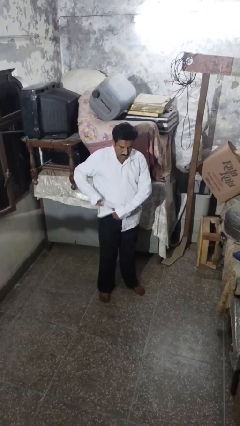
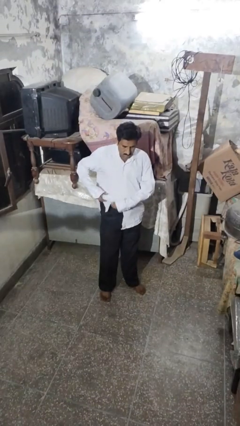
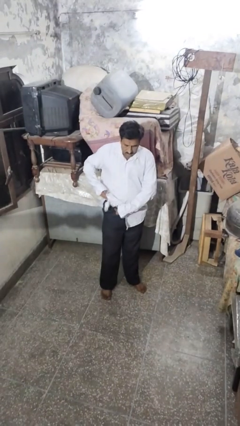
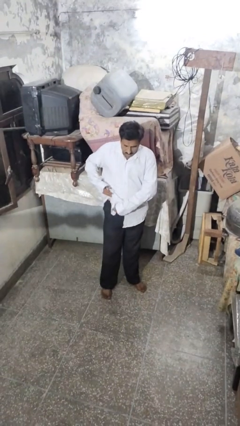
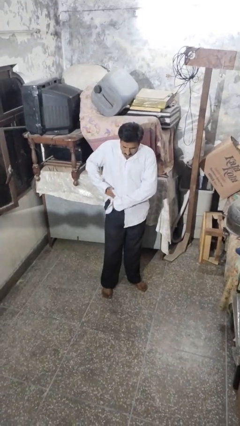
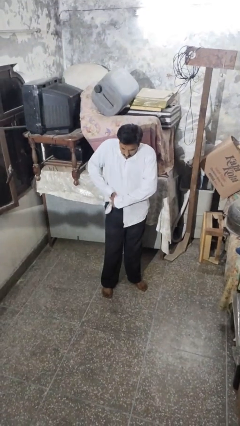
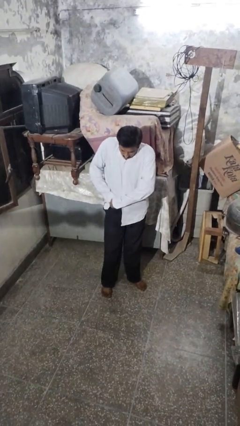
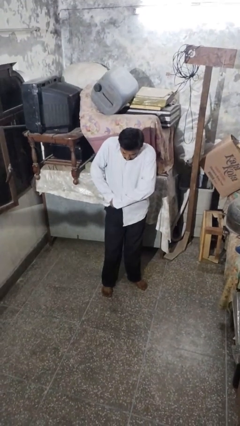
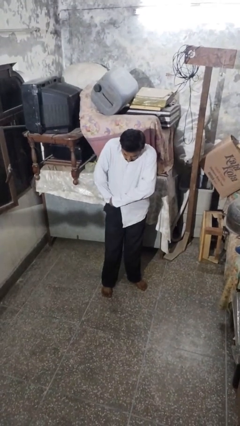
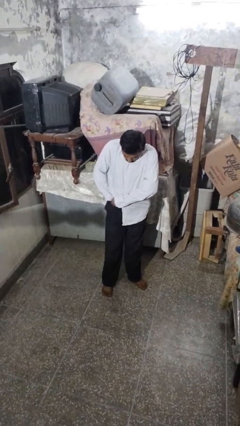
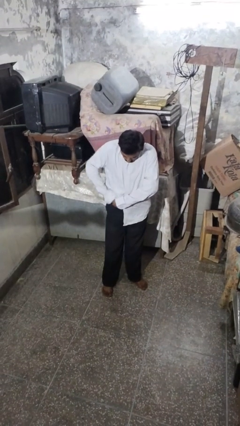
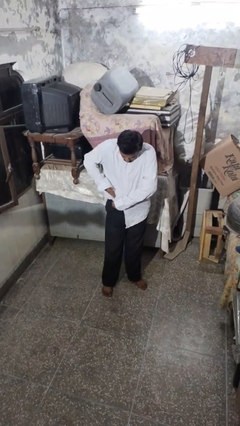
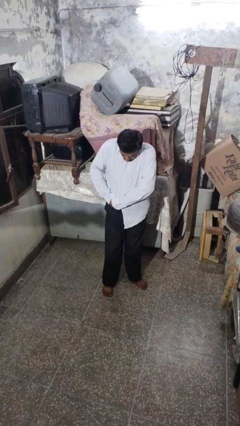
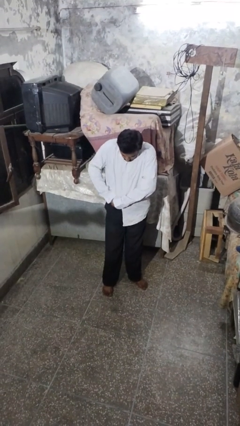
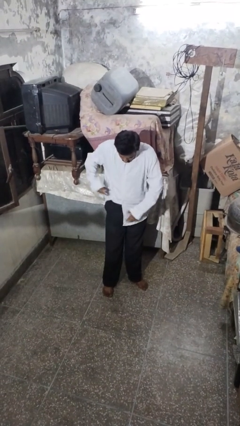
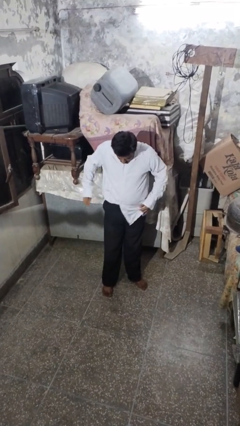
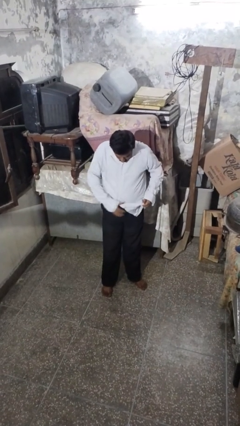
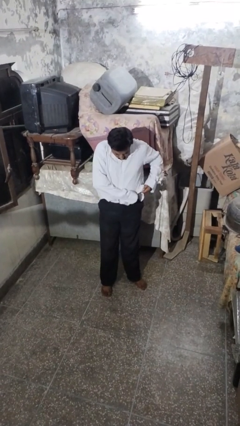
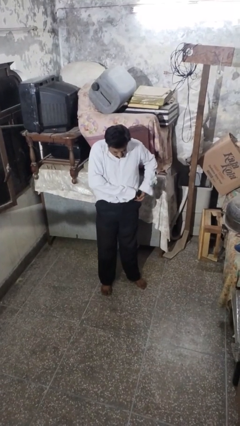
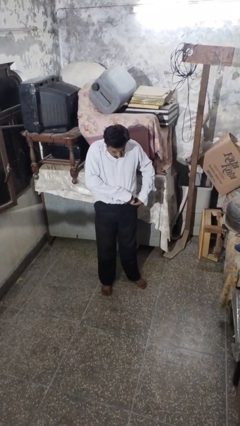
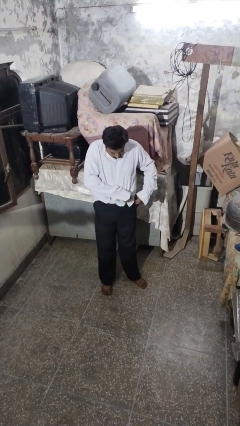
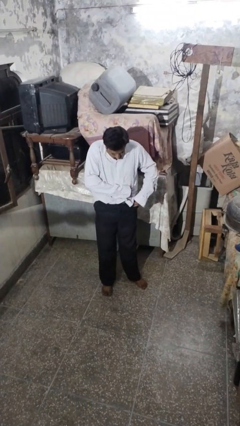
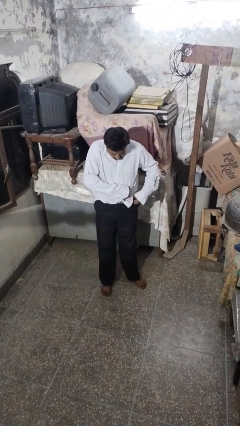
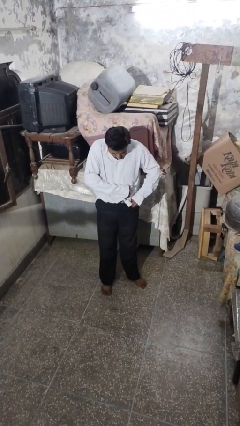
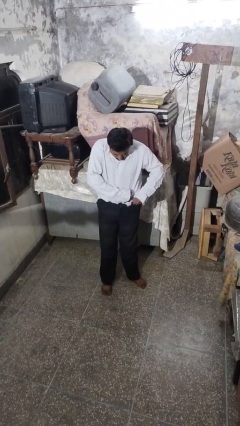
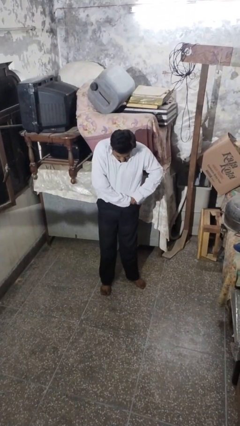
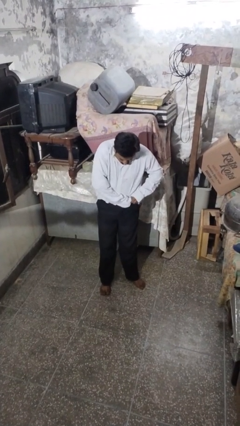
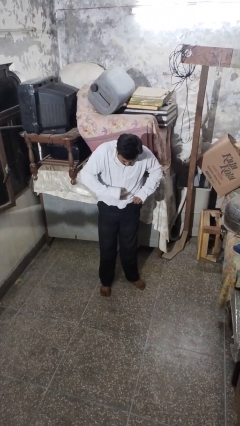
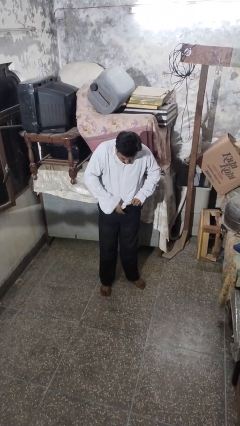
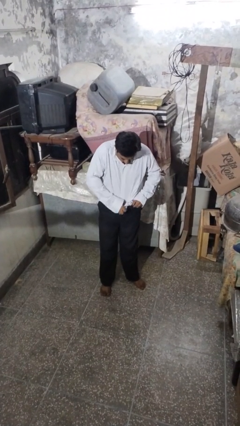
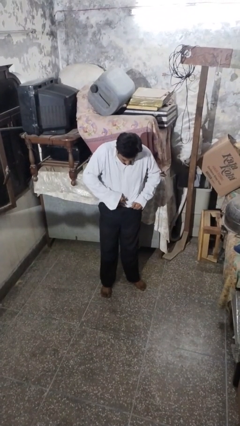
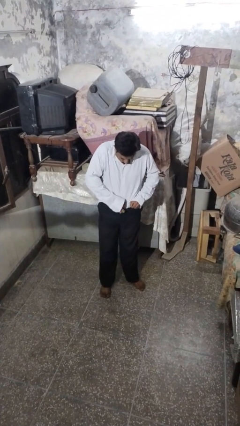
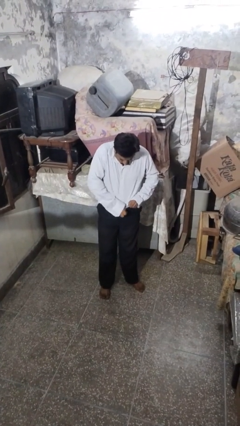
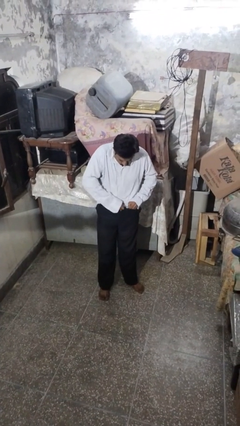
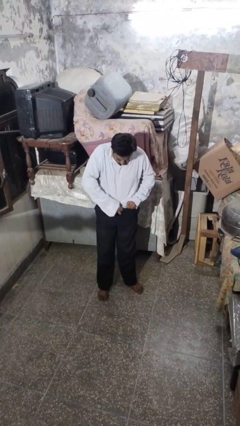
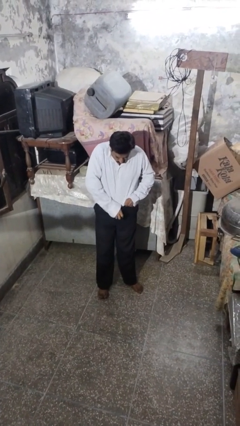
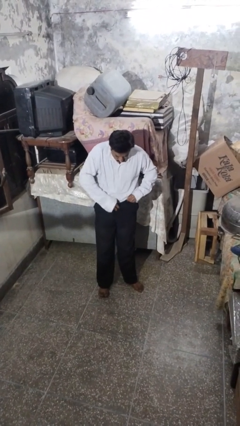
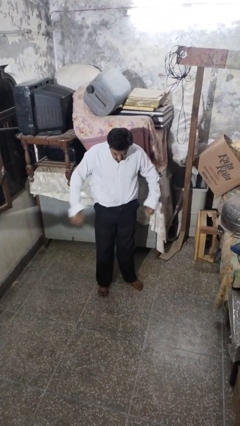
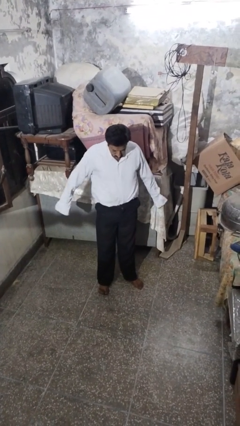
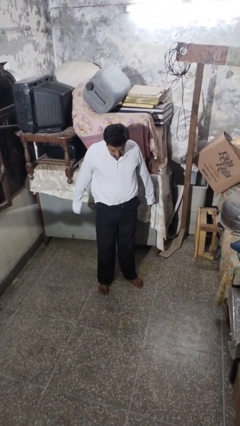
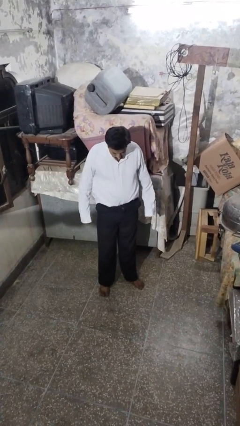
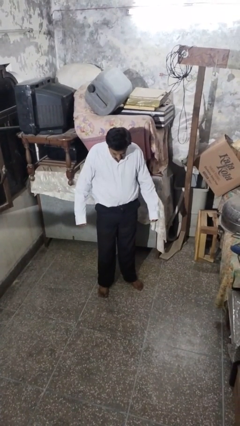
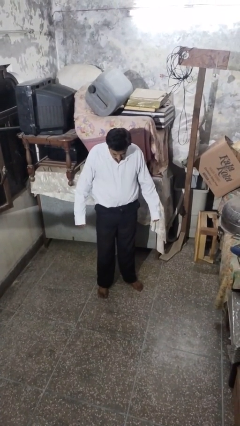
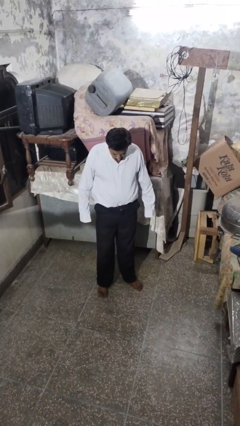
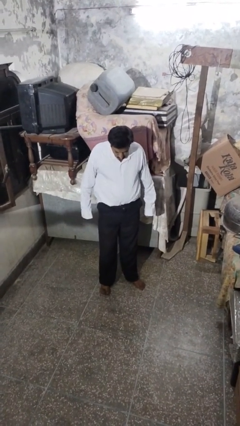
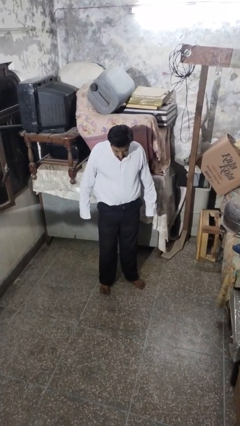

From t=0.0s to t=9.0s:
person tucks in shirt

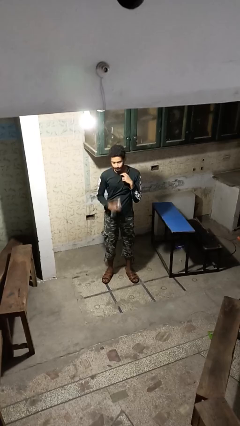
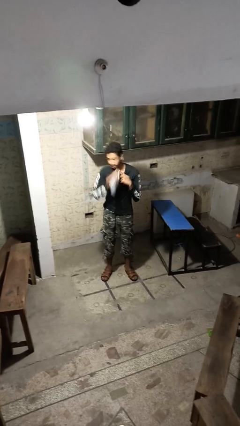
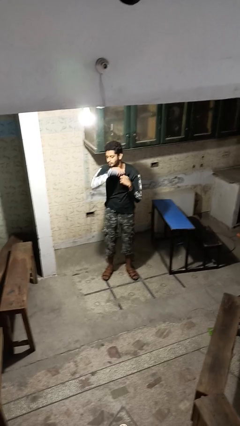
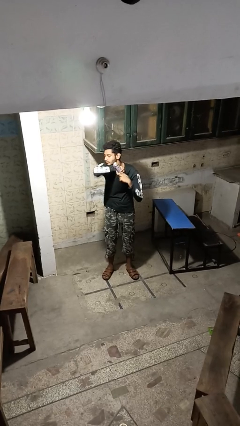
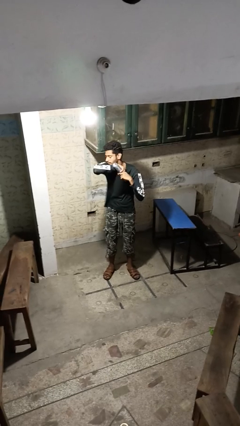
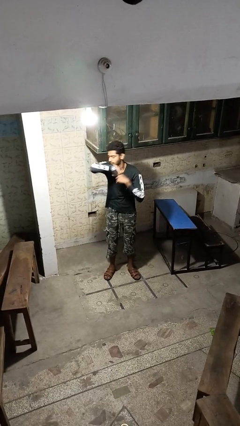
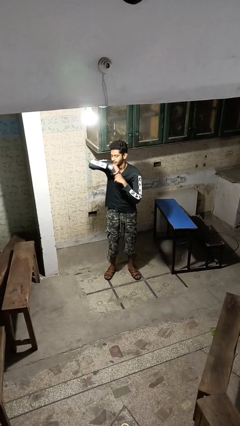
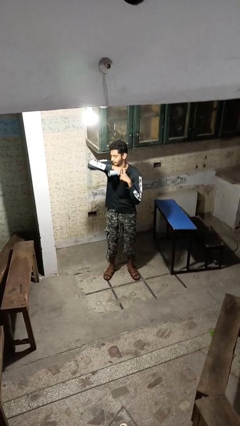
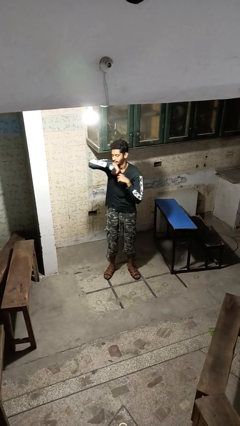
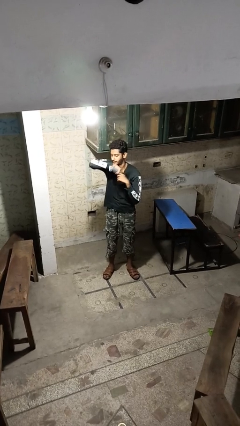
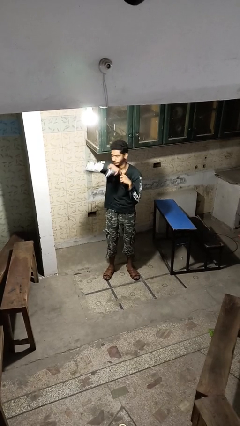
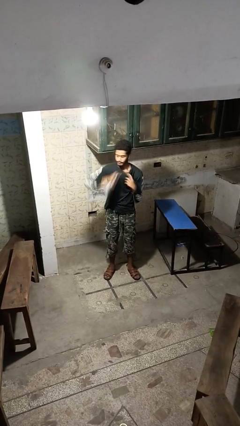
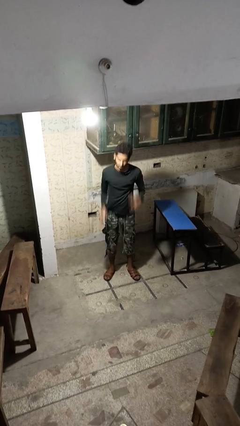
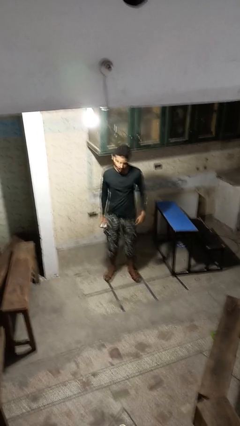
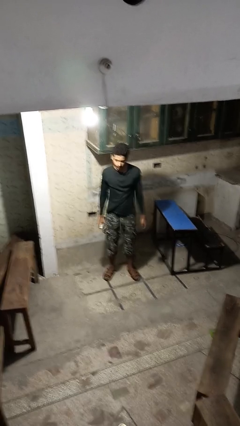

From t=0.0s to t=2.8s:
person applies deodorant

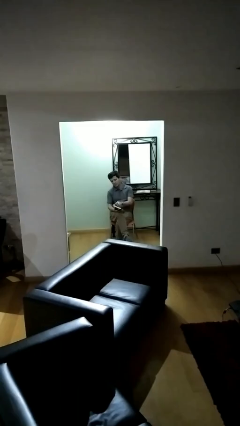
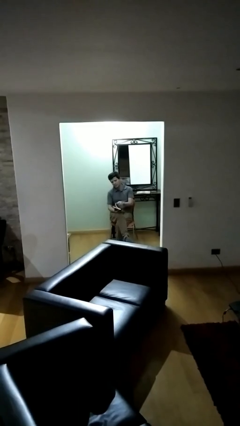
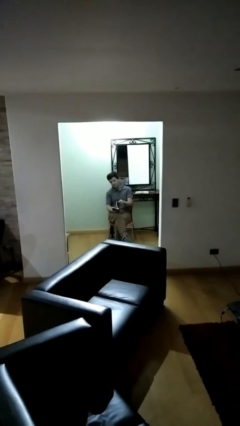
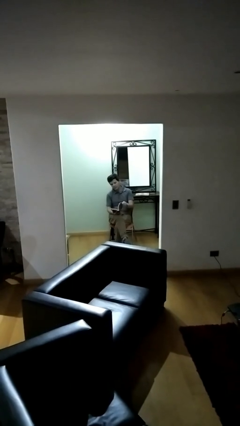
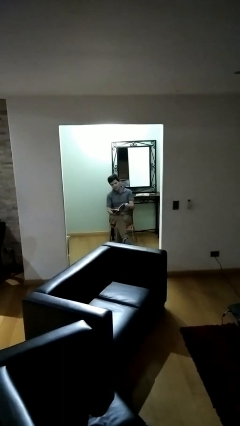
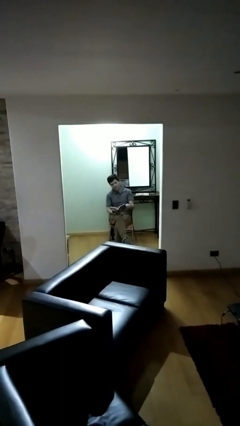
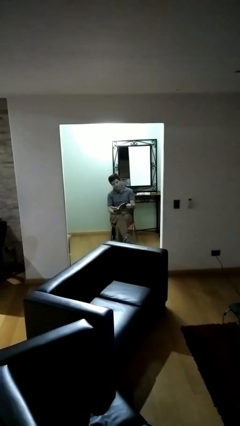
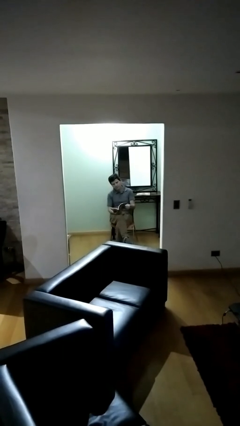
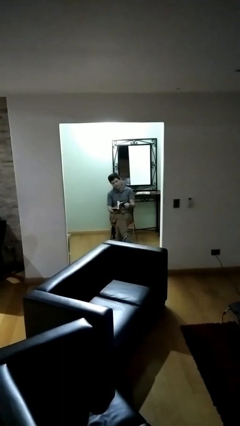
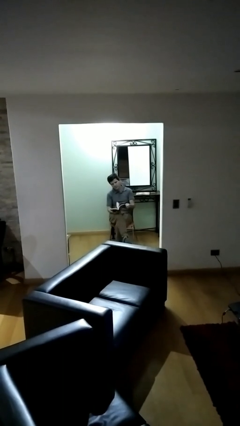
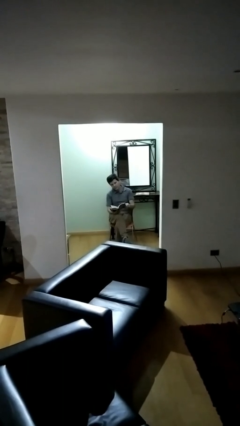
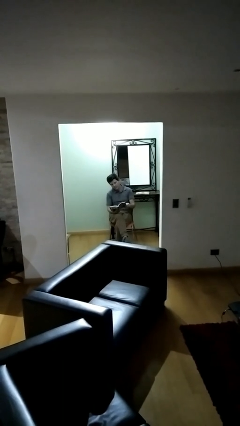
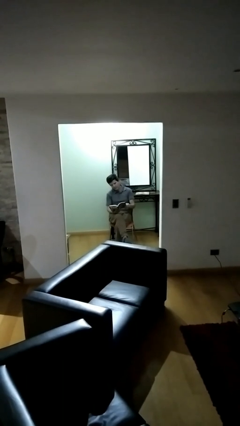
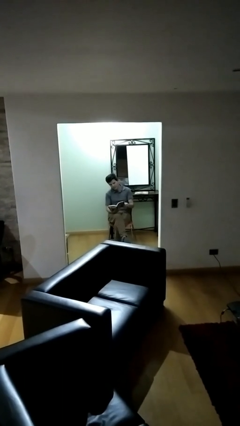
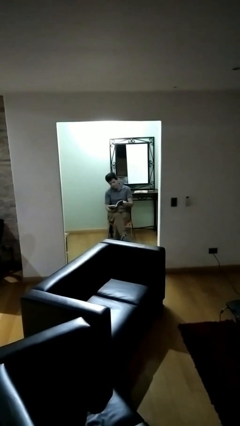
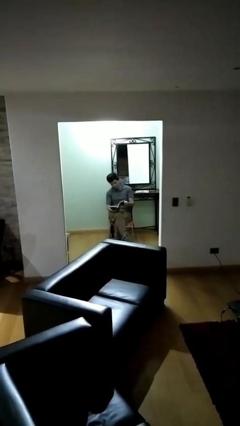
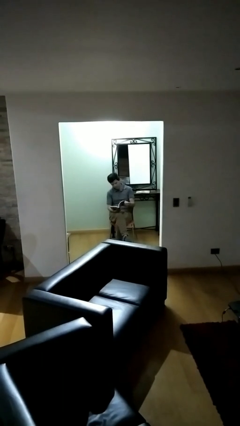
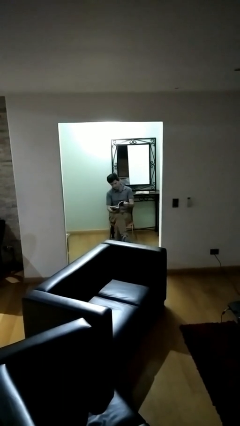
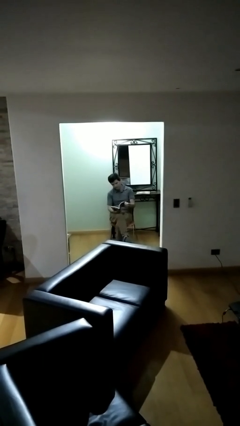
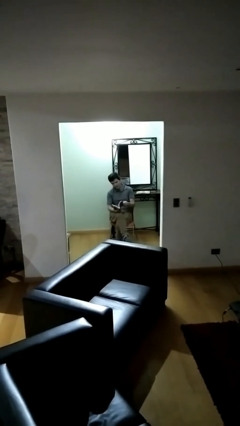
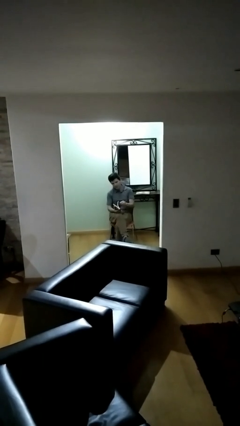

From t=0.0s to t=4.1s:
person reads document

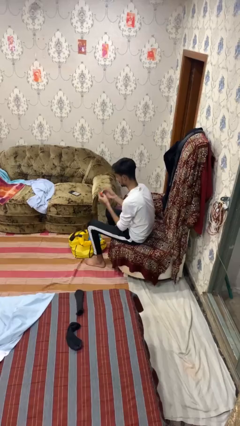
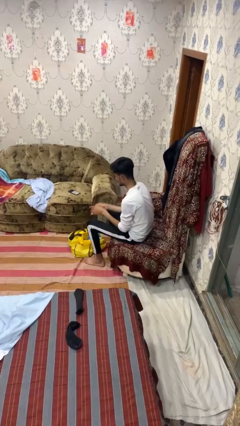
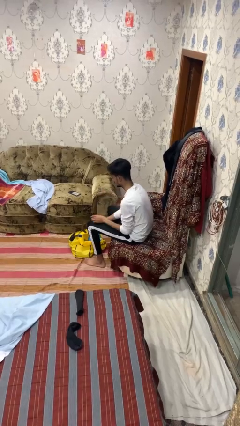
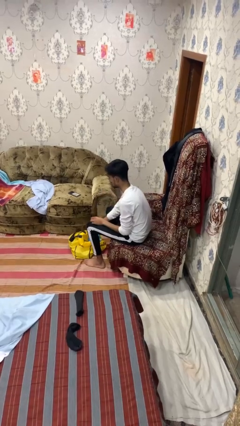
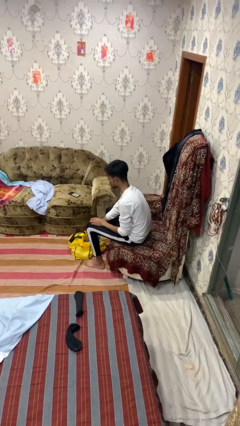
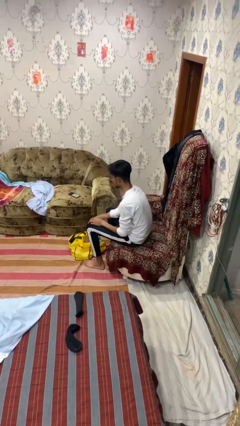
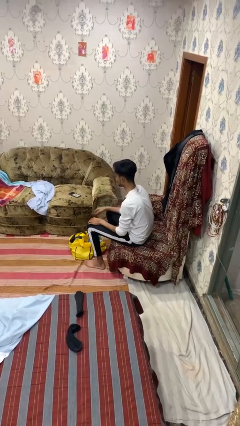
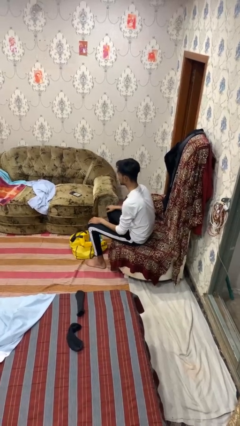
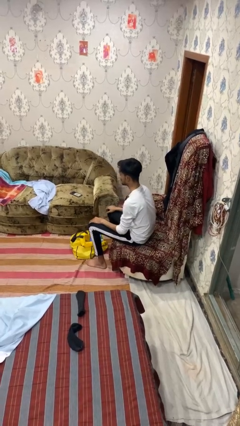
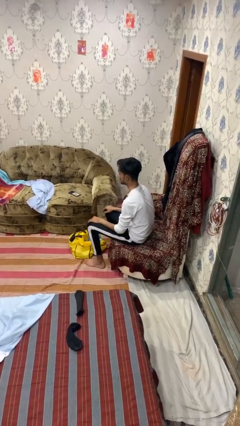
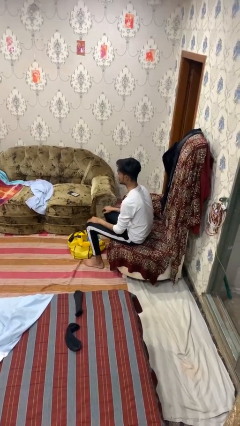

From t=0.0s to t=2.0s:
person puts object into bag

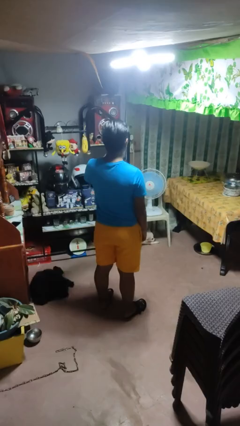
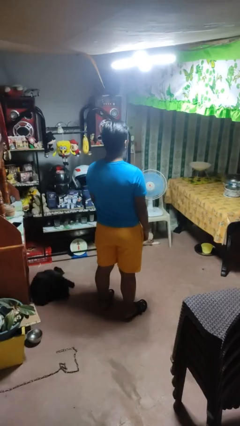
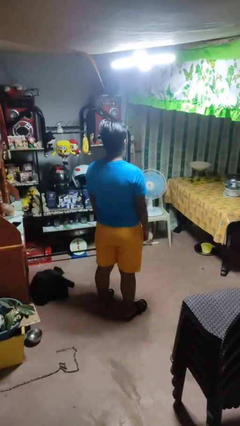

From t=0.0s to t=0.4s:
person gestures lower hand
